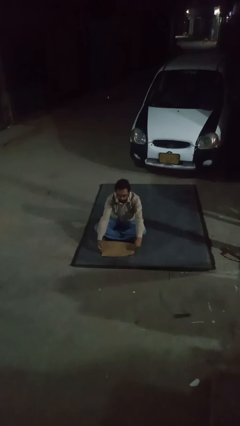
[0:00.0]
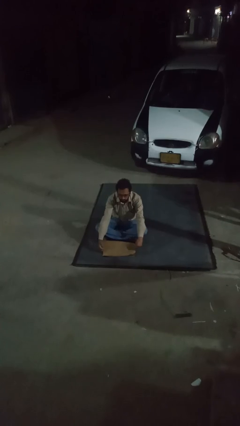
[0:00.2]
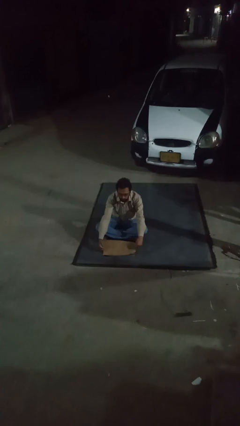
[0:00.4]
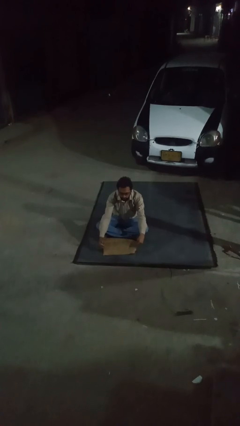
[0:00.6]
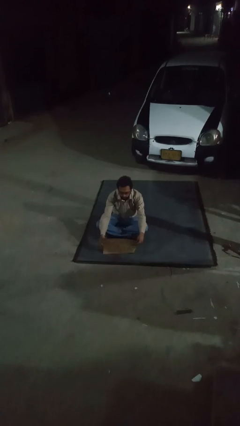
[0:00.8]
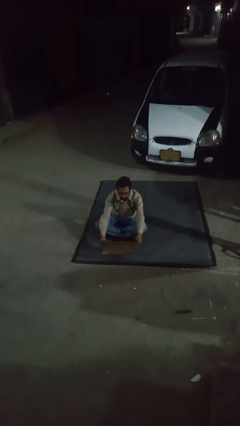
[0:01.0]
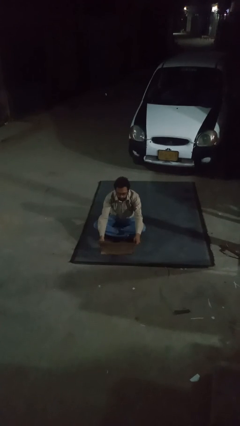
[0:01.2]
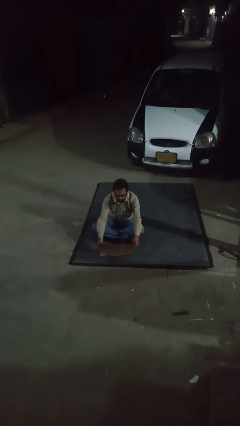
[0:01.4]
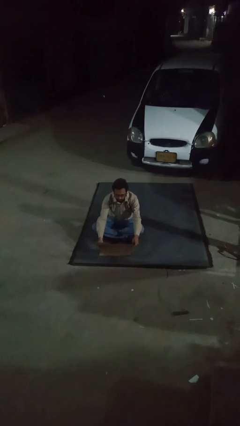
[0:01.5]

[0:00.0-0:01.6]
person opens laptop

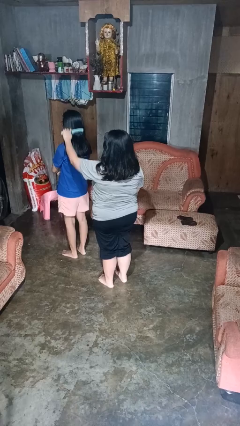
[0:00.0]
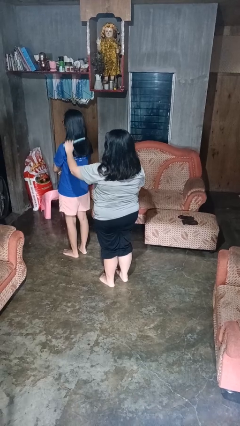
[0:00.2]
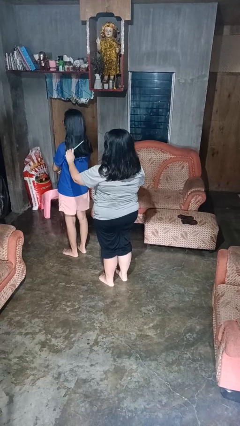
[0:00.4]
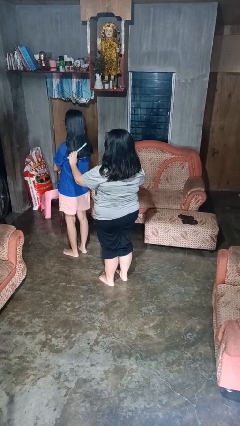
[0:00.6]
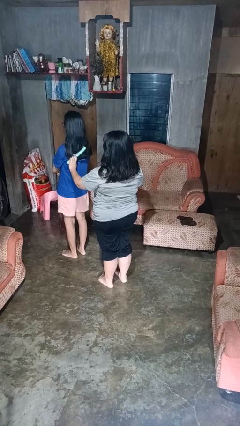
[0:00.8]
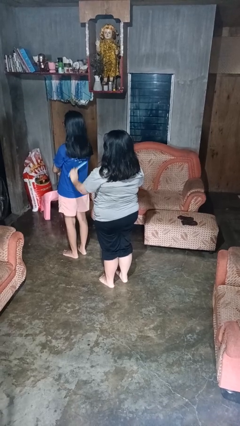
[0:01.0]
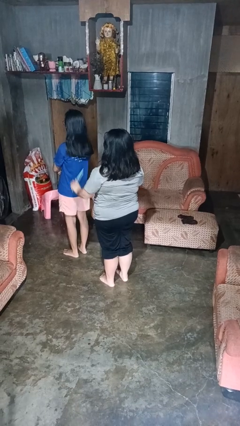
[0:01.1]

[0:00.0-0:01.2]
person brushes hair of person

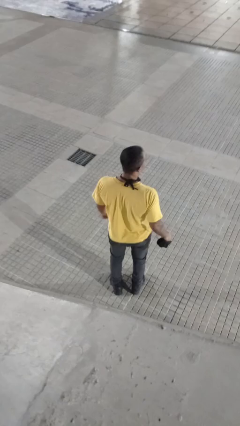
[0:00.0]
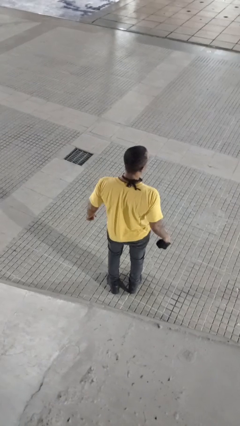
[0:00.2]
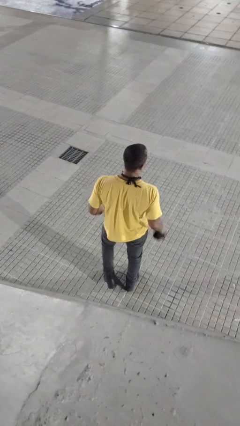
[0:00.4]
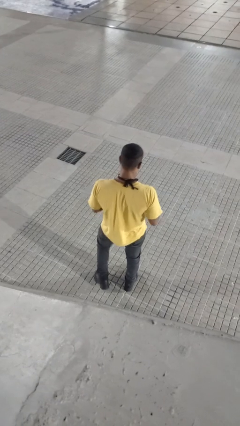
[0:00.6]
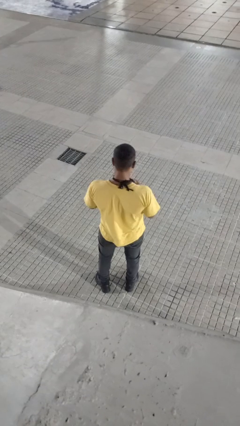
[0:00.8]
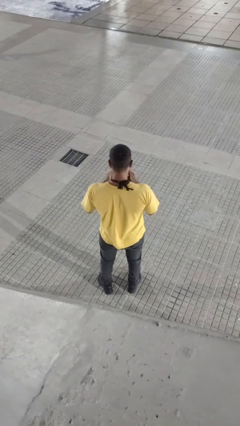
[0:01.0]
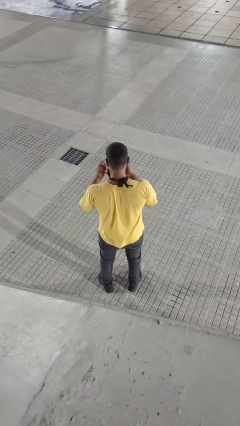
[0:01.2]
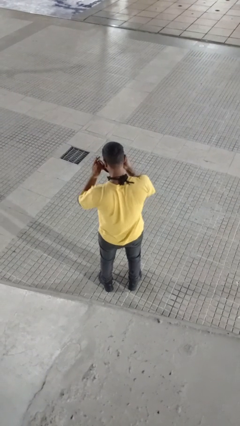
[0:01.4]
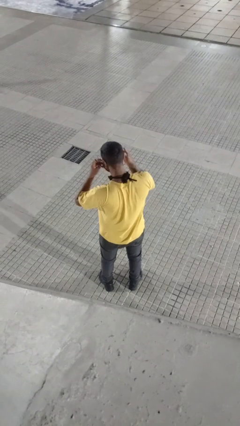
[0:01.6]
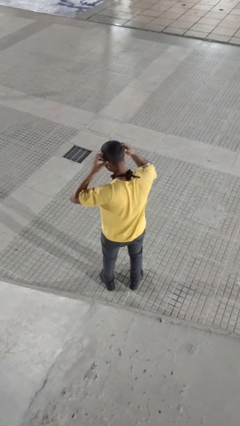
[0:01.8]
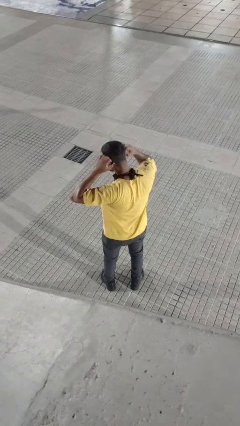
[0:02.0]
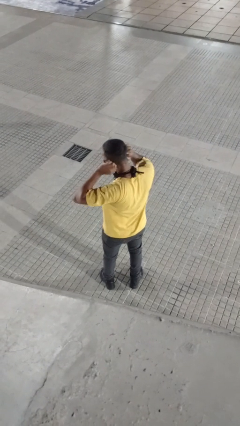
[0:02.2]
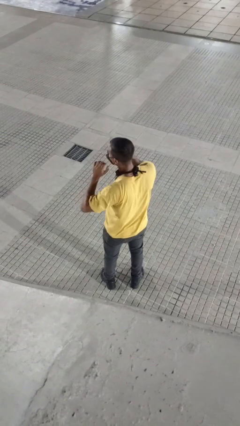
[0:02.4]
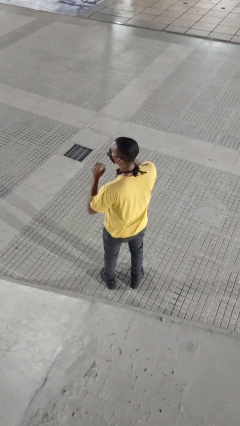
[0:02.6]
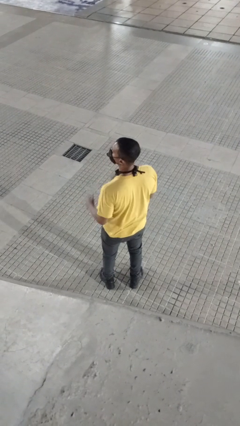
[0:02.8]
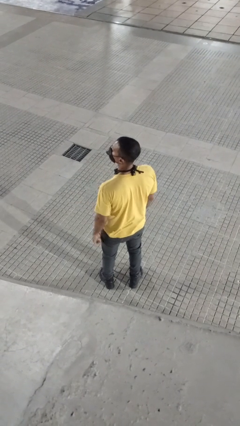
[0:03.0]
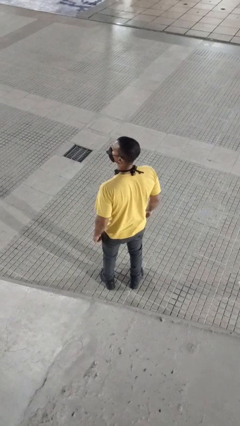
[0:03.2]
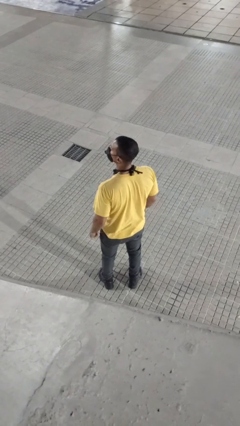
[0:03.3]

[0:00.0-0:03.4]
person puts on facemask

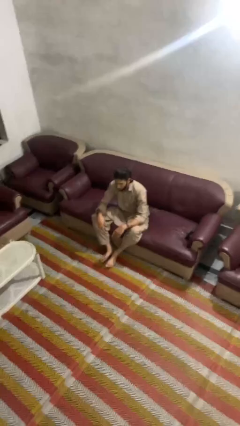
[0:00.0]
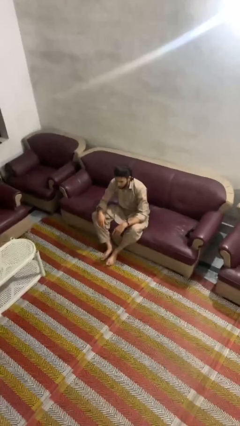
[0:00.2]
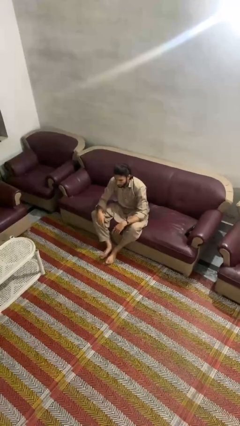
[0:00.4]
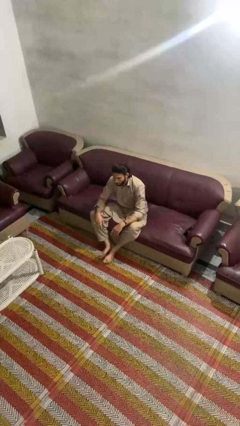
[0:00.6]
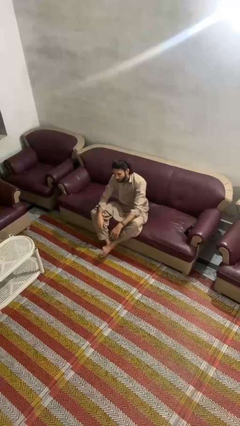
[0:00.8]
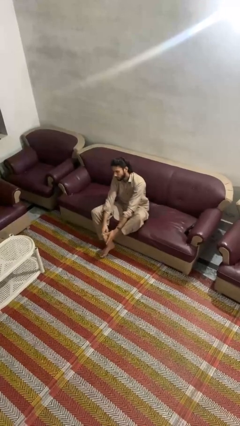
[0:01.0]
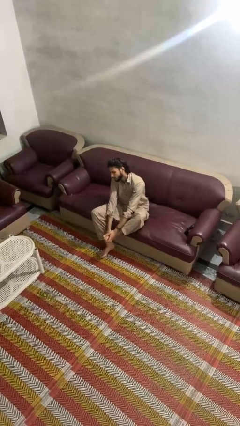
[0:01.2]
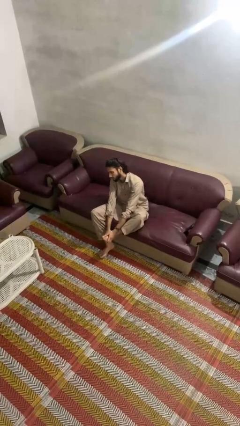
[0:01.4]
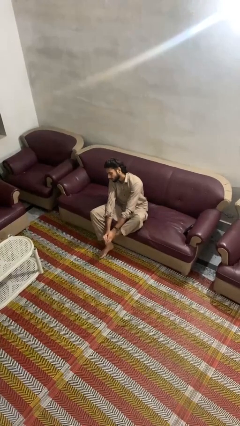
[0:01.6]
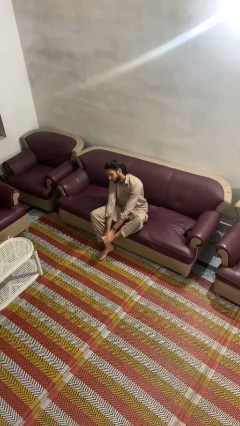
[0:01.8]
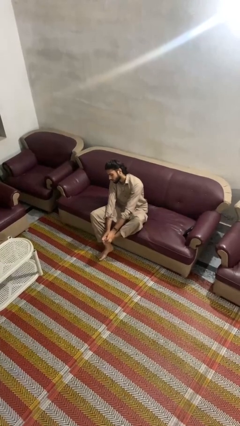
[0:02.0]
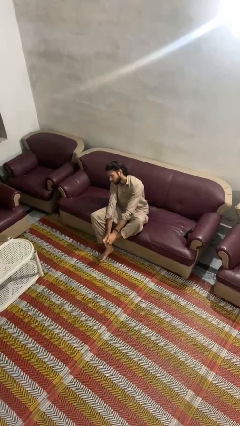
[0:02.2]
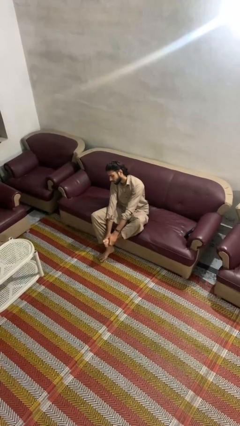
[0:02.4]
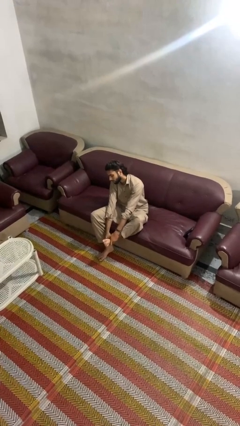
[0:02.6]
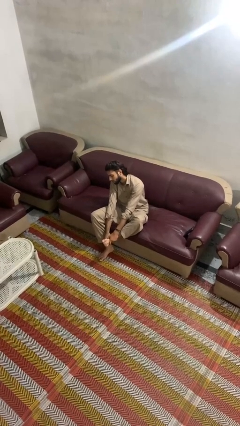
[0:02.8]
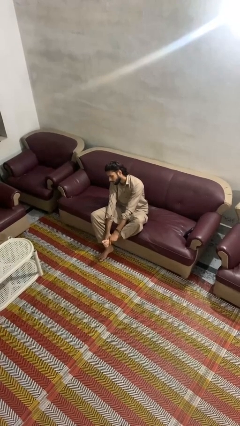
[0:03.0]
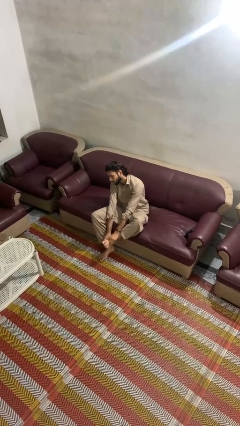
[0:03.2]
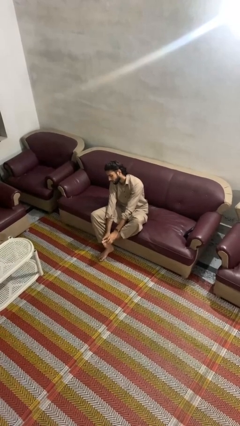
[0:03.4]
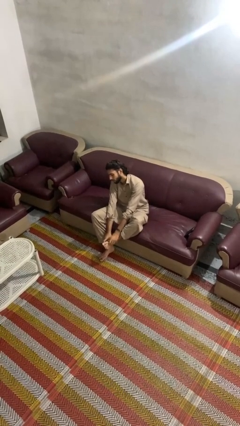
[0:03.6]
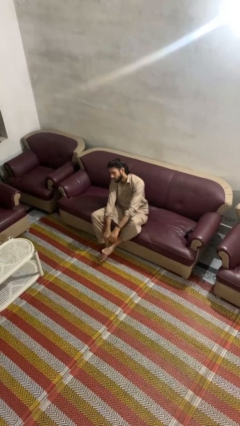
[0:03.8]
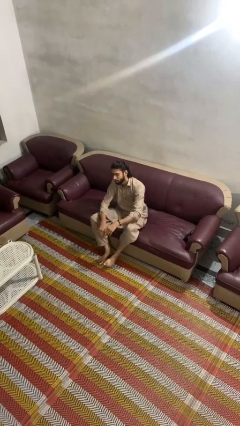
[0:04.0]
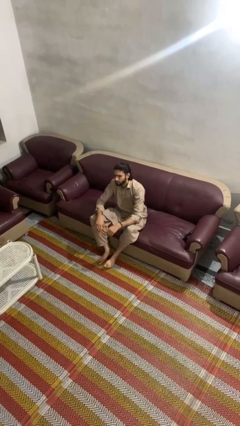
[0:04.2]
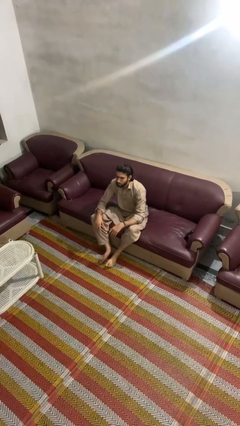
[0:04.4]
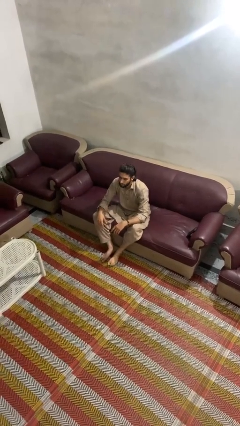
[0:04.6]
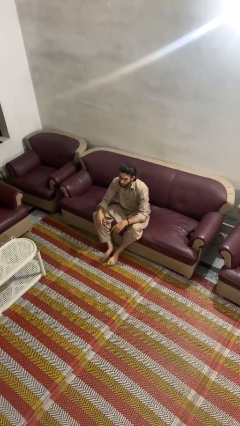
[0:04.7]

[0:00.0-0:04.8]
person rubs foot

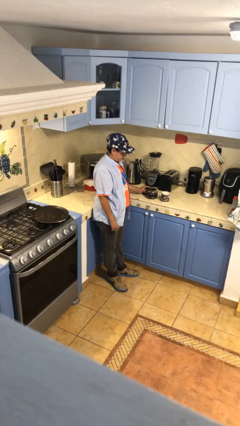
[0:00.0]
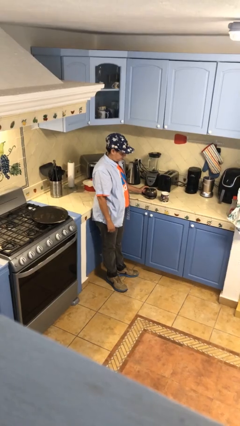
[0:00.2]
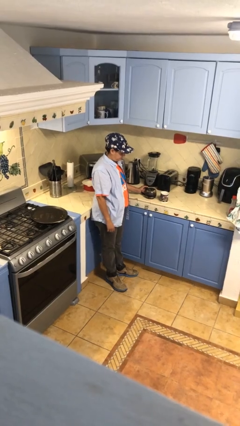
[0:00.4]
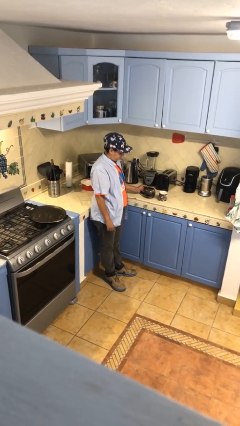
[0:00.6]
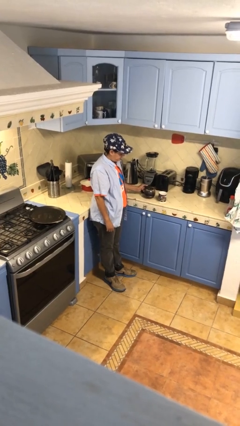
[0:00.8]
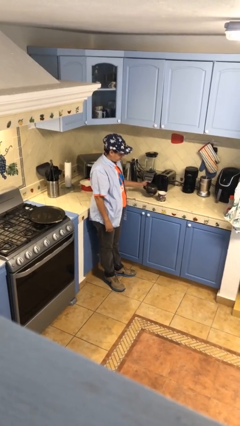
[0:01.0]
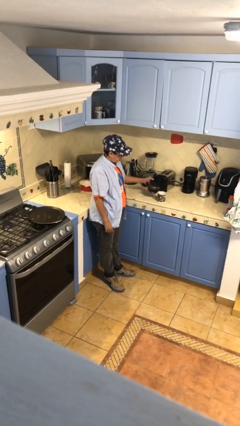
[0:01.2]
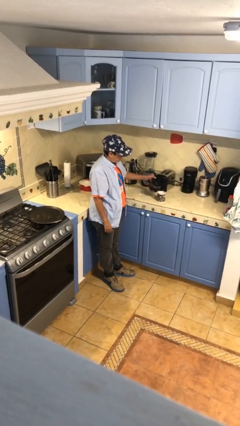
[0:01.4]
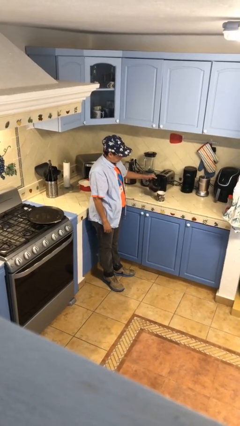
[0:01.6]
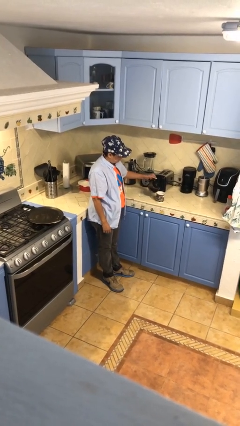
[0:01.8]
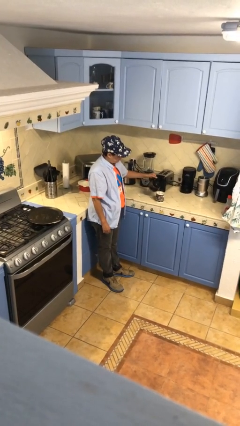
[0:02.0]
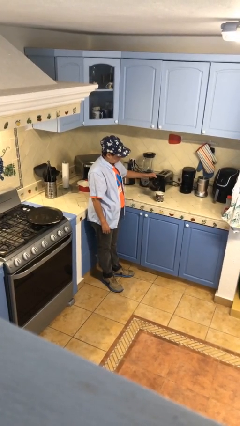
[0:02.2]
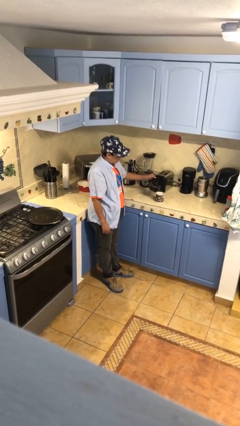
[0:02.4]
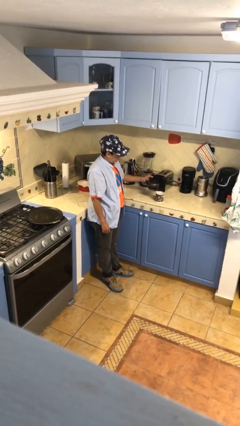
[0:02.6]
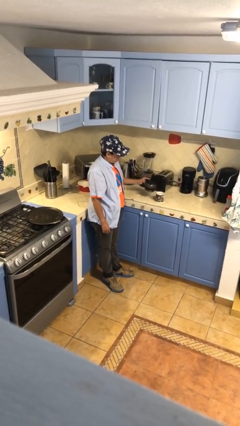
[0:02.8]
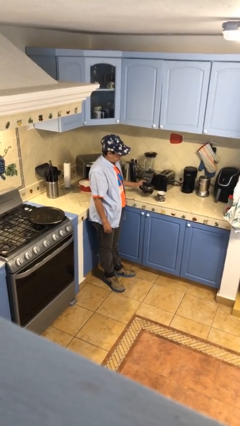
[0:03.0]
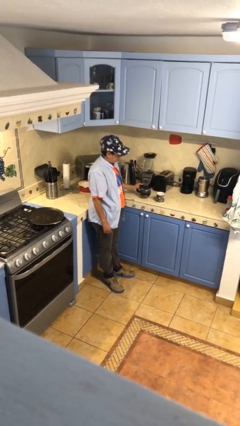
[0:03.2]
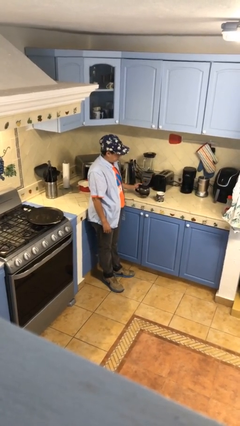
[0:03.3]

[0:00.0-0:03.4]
person pours coffee into mug

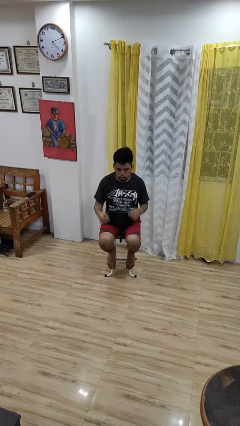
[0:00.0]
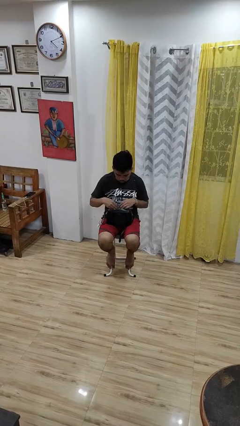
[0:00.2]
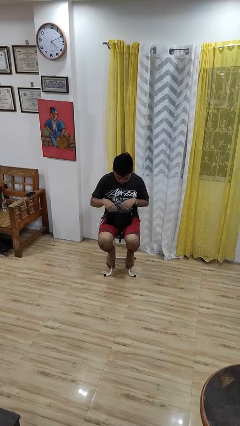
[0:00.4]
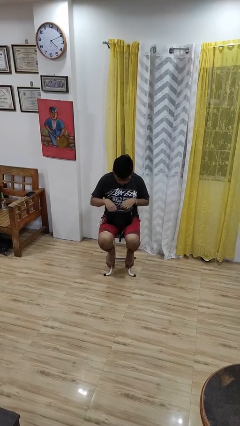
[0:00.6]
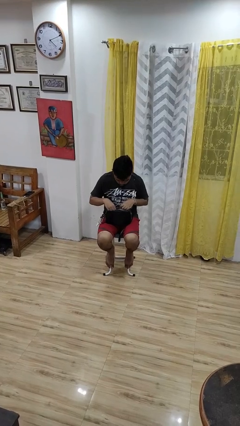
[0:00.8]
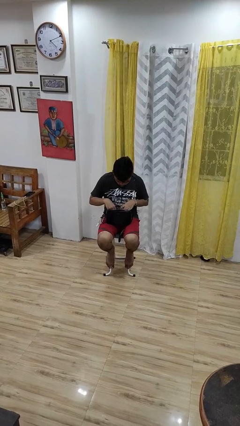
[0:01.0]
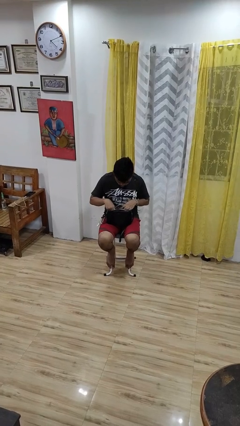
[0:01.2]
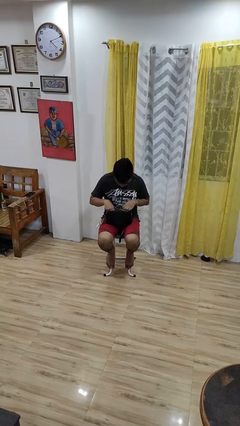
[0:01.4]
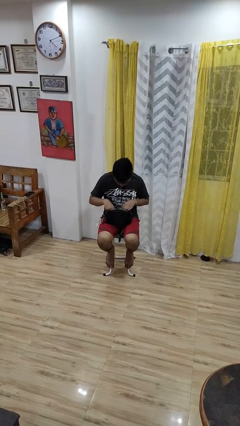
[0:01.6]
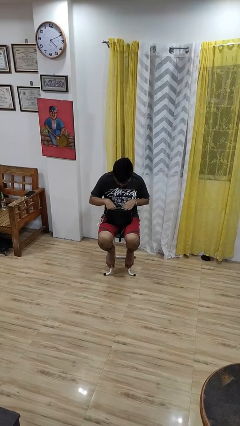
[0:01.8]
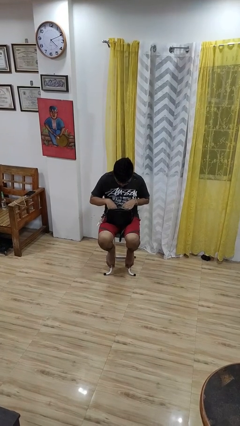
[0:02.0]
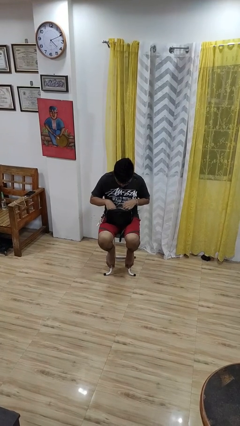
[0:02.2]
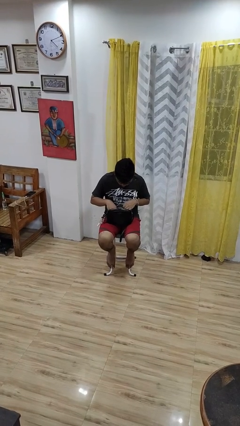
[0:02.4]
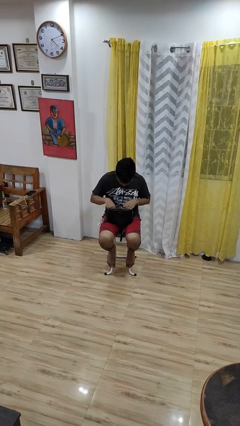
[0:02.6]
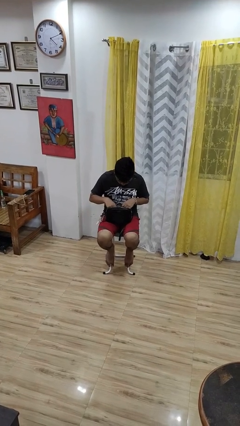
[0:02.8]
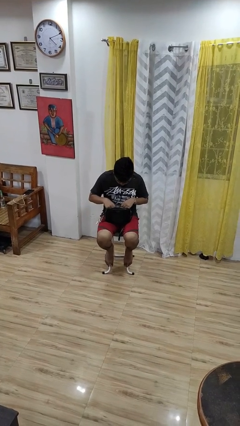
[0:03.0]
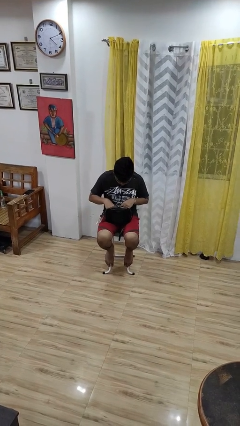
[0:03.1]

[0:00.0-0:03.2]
person searches in purse
